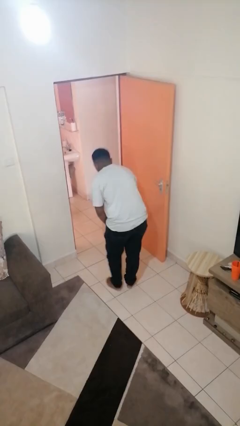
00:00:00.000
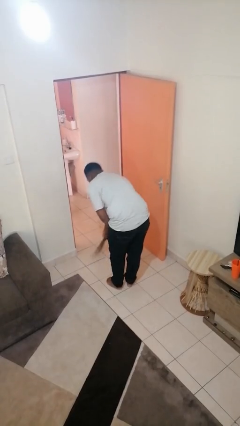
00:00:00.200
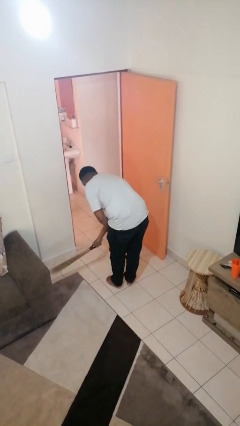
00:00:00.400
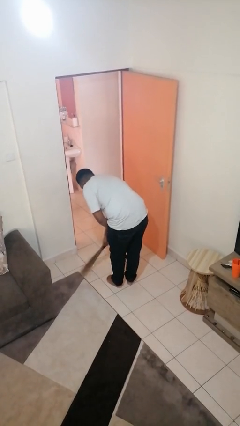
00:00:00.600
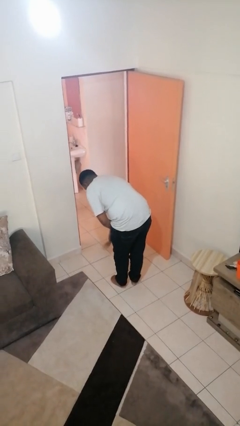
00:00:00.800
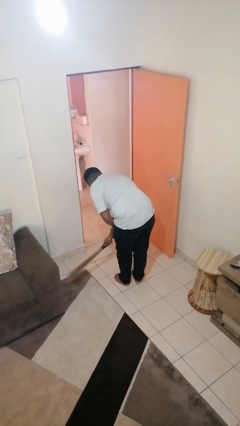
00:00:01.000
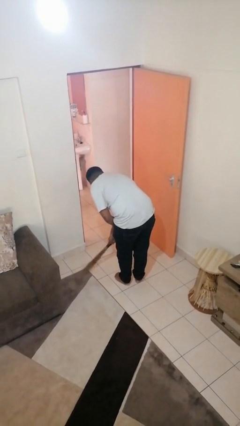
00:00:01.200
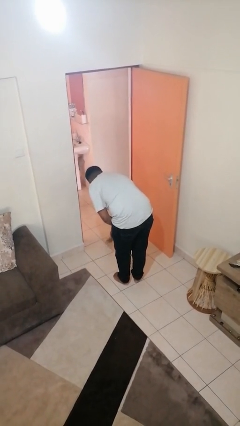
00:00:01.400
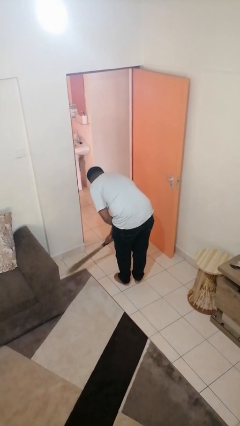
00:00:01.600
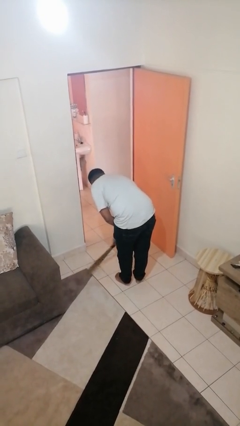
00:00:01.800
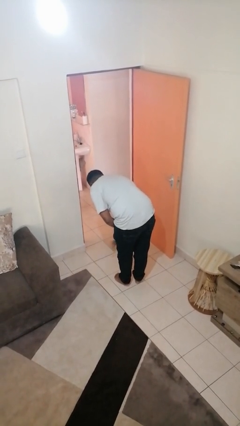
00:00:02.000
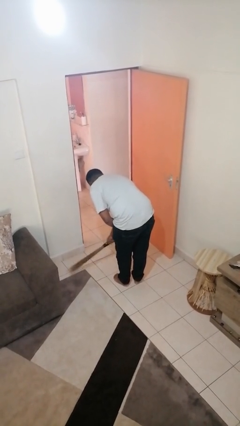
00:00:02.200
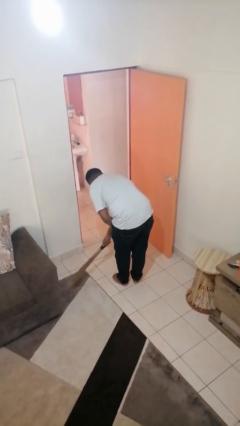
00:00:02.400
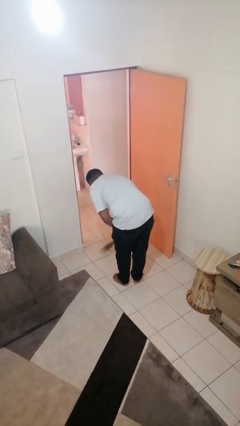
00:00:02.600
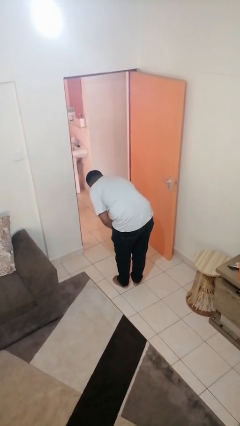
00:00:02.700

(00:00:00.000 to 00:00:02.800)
person sweeps floor

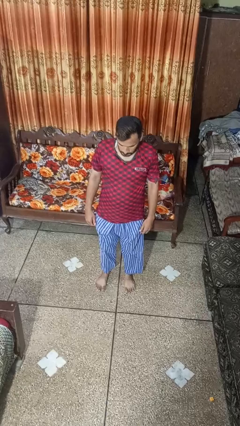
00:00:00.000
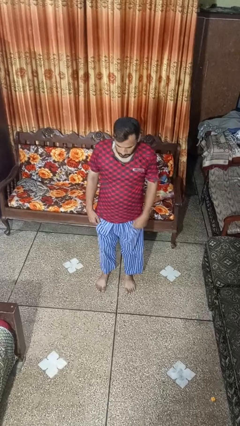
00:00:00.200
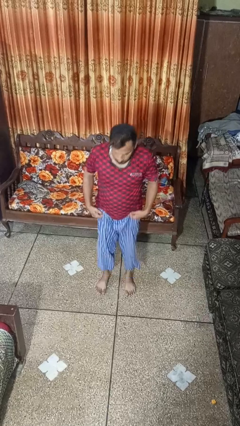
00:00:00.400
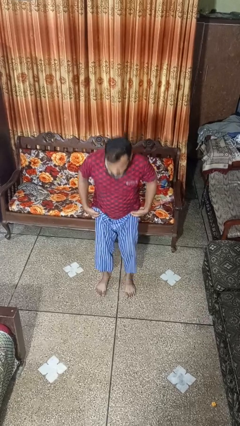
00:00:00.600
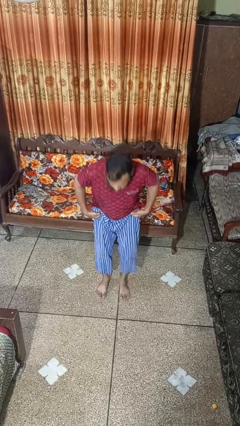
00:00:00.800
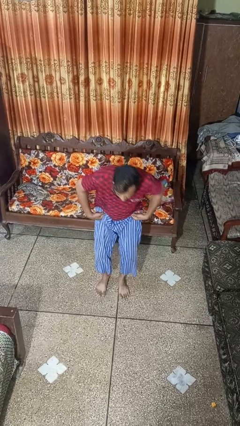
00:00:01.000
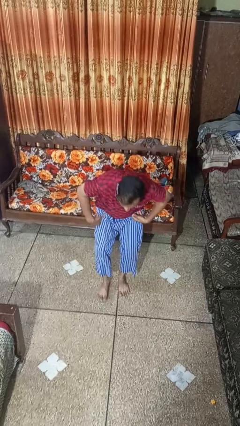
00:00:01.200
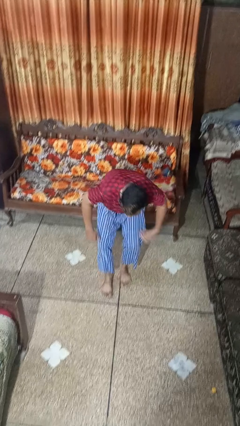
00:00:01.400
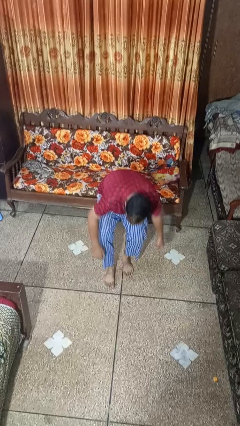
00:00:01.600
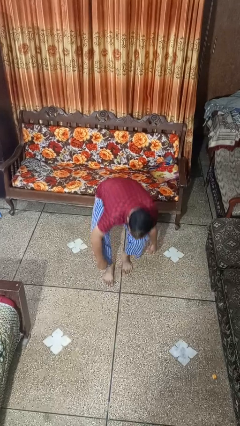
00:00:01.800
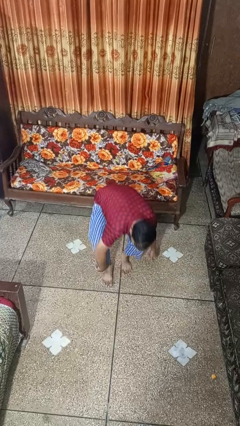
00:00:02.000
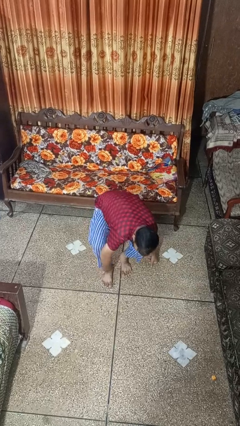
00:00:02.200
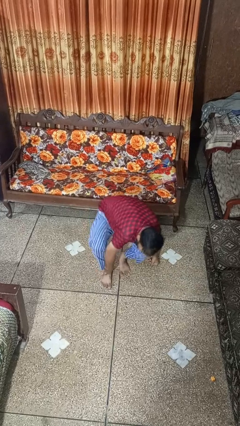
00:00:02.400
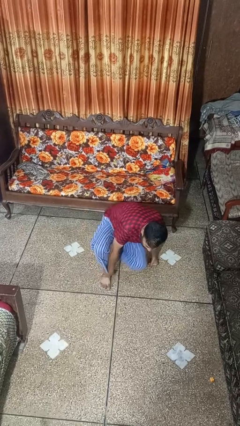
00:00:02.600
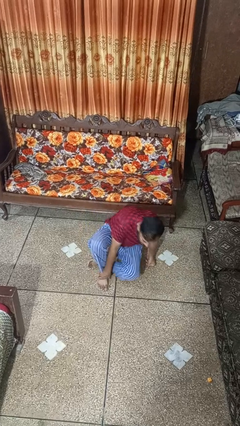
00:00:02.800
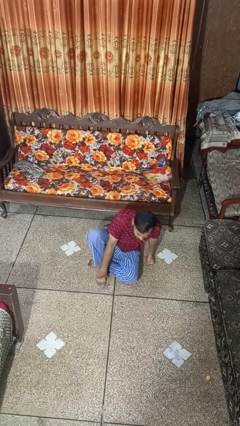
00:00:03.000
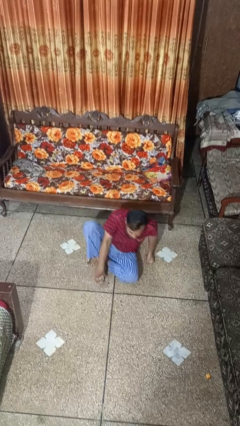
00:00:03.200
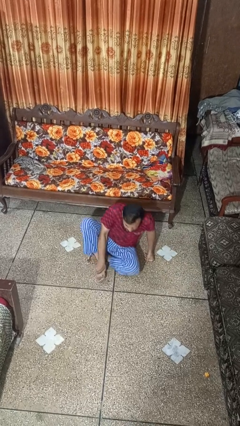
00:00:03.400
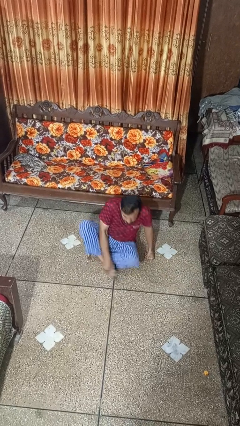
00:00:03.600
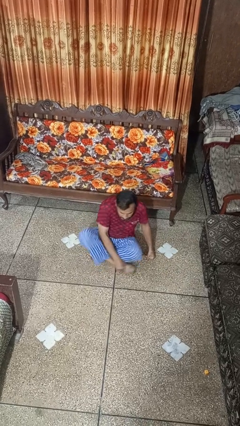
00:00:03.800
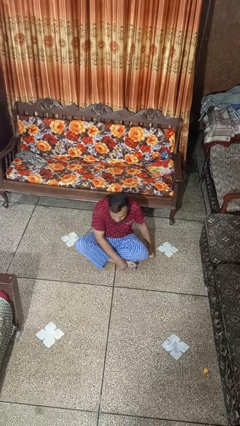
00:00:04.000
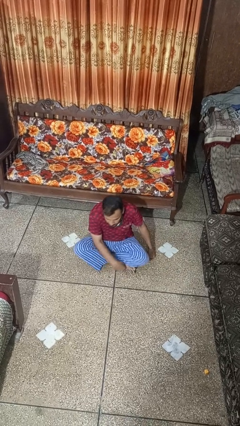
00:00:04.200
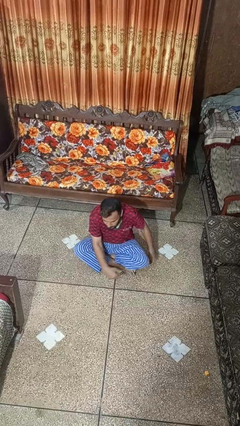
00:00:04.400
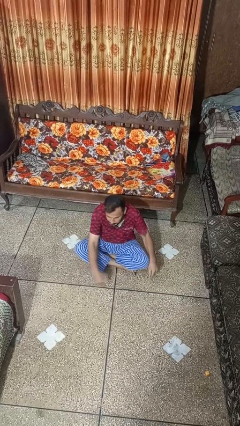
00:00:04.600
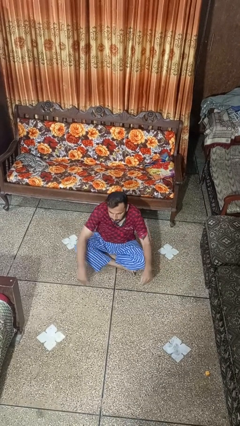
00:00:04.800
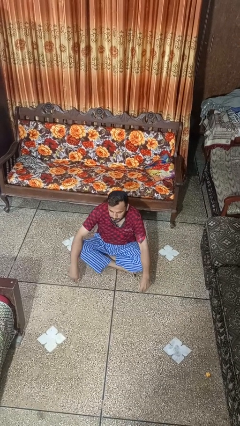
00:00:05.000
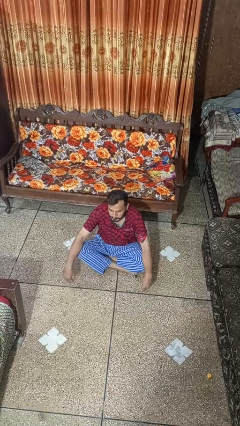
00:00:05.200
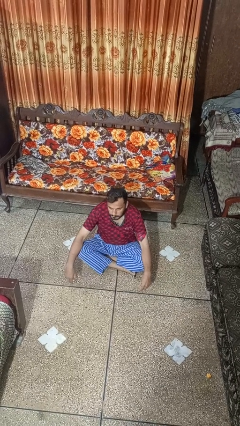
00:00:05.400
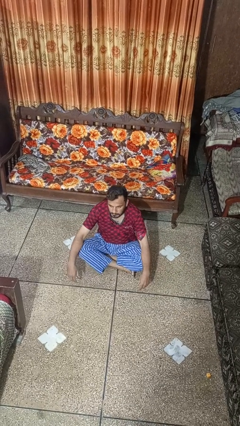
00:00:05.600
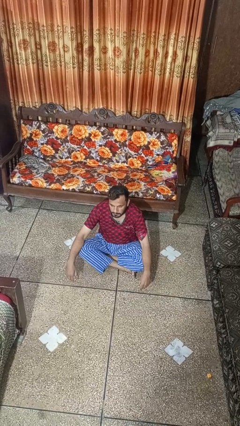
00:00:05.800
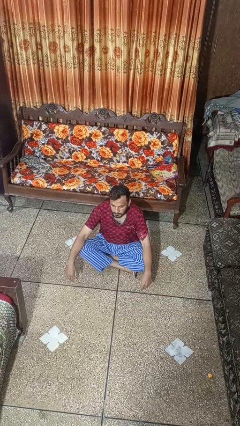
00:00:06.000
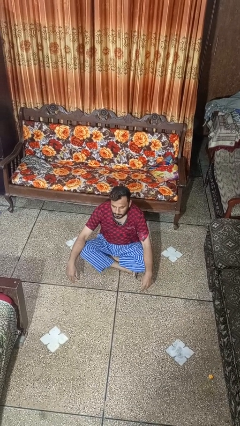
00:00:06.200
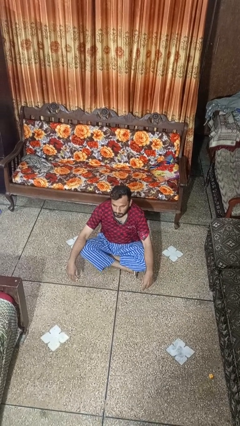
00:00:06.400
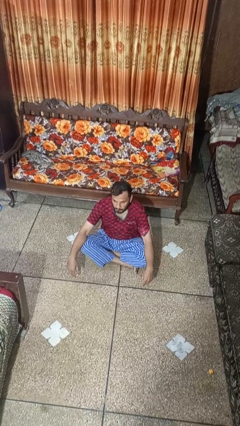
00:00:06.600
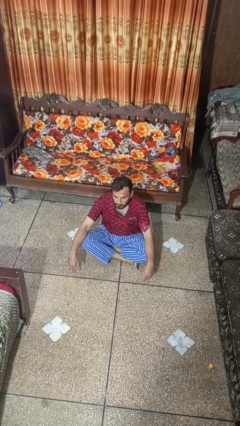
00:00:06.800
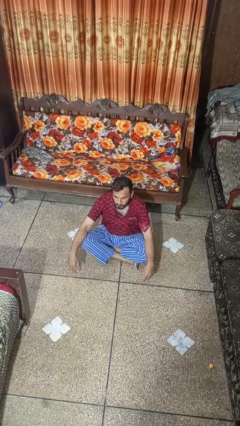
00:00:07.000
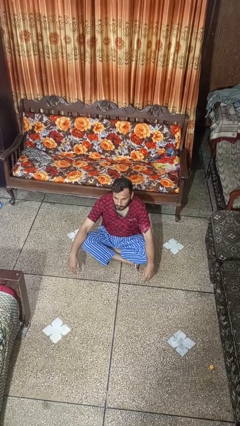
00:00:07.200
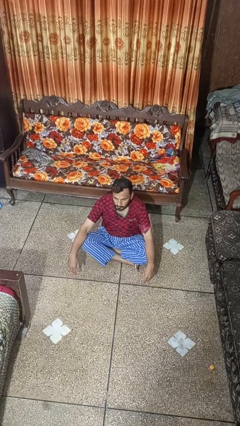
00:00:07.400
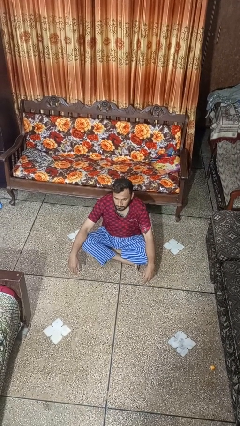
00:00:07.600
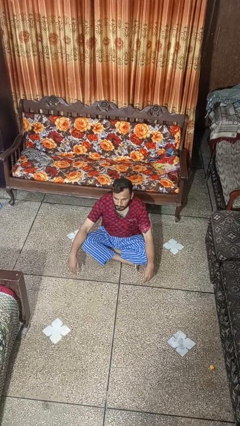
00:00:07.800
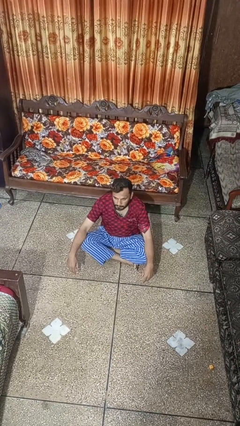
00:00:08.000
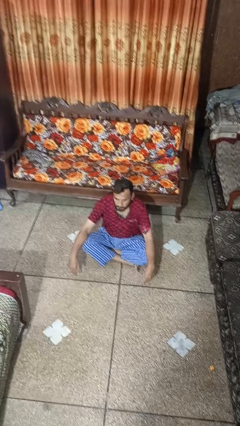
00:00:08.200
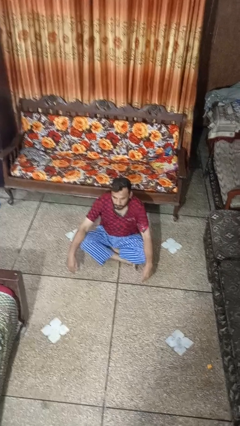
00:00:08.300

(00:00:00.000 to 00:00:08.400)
person sits crisscross

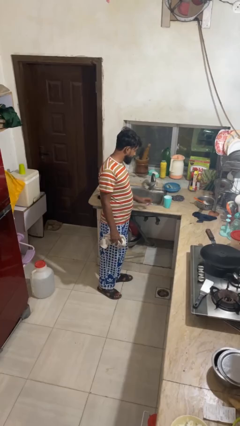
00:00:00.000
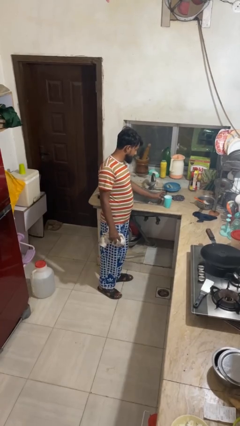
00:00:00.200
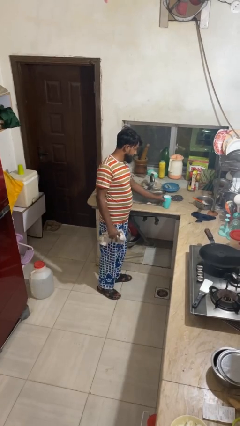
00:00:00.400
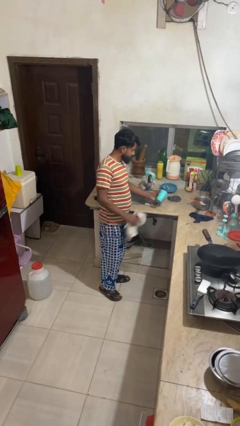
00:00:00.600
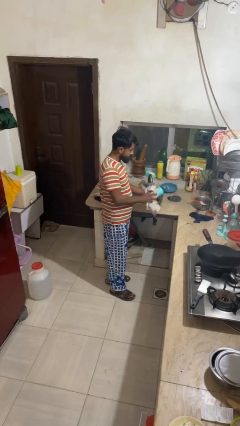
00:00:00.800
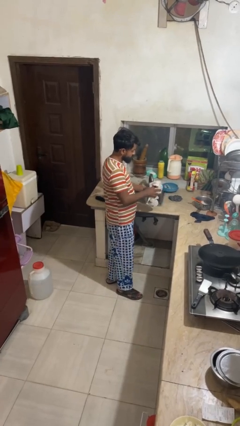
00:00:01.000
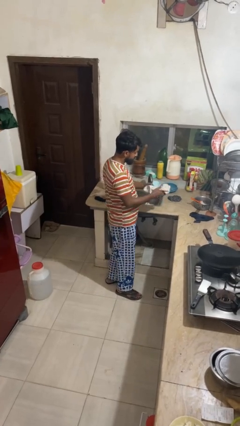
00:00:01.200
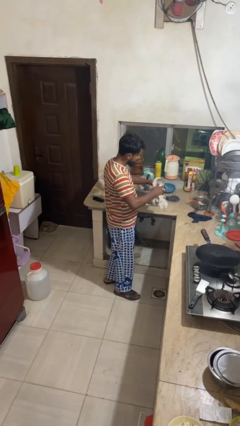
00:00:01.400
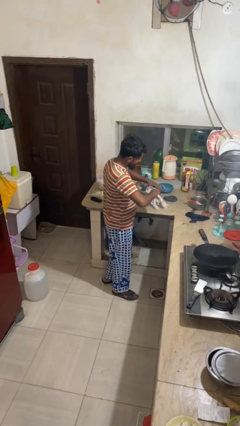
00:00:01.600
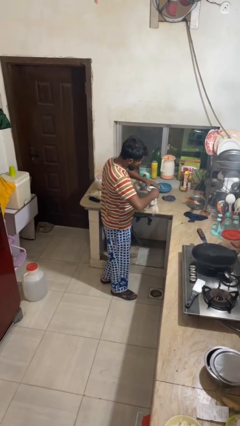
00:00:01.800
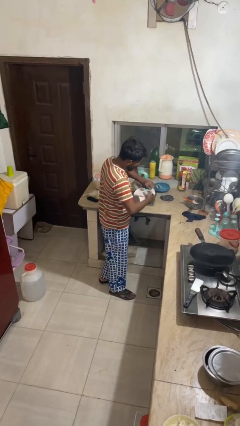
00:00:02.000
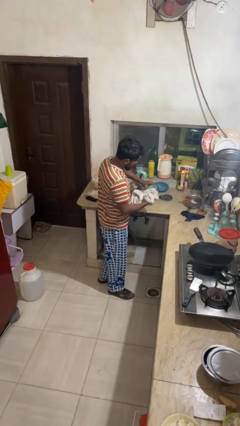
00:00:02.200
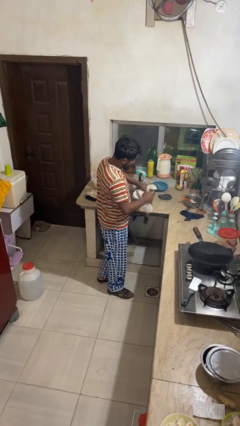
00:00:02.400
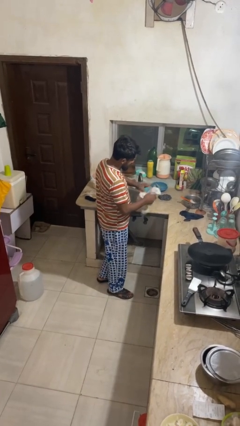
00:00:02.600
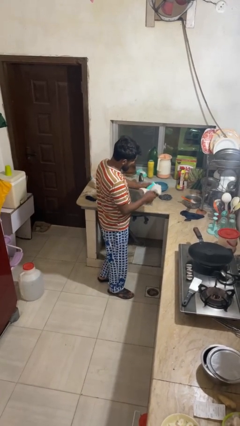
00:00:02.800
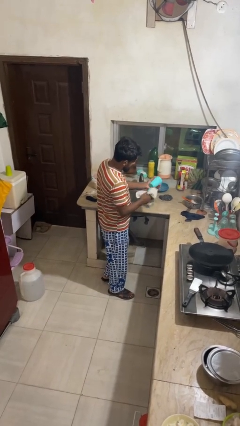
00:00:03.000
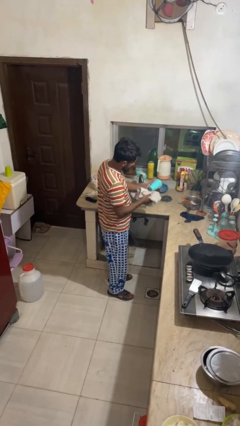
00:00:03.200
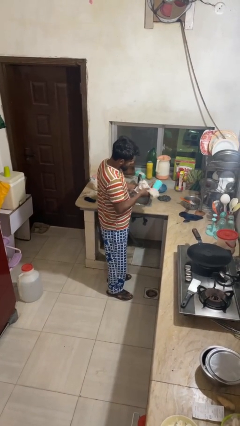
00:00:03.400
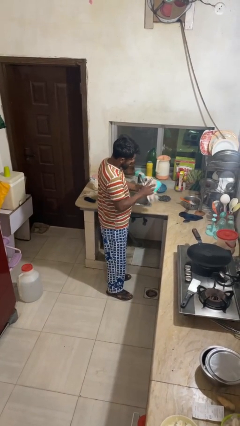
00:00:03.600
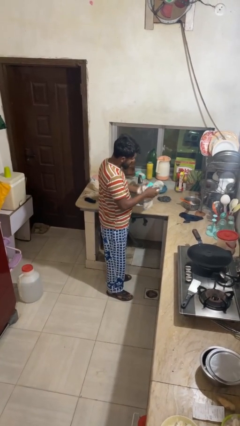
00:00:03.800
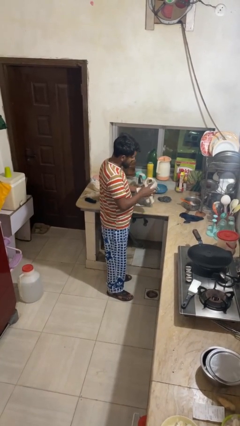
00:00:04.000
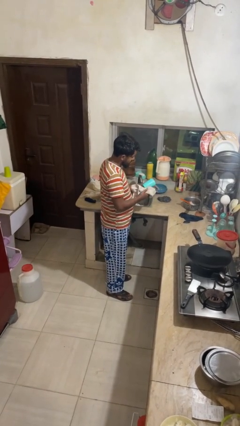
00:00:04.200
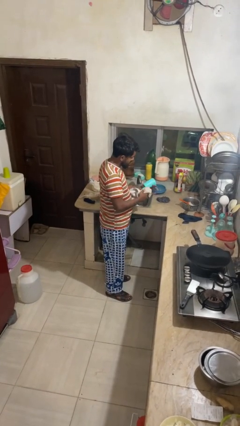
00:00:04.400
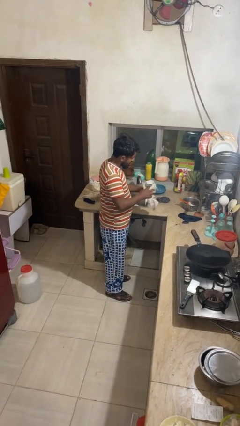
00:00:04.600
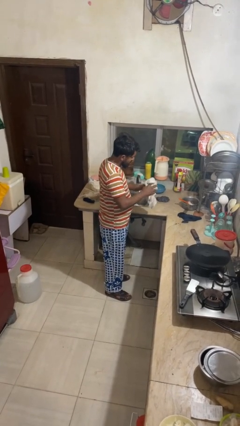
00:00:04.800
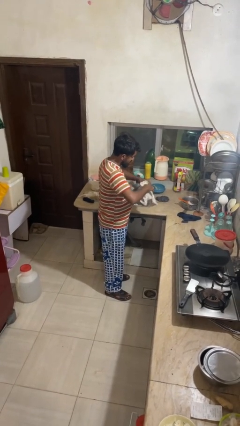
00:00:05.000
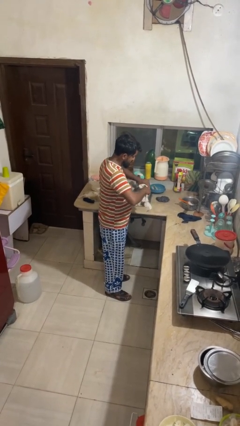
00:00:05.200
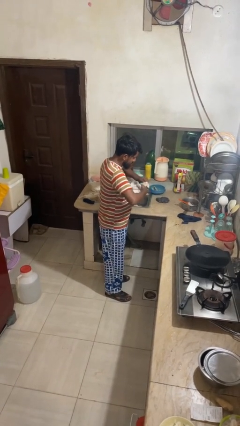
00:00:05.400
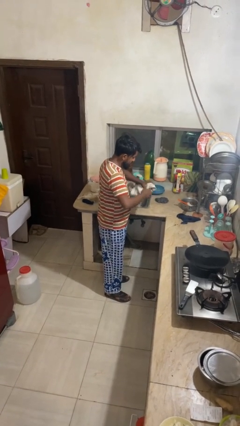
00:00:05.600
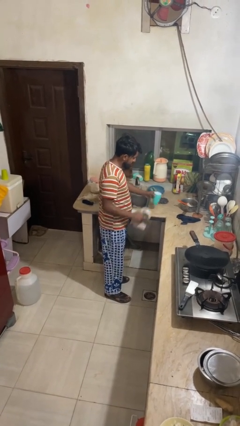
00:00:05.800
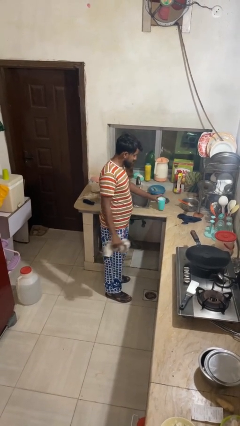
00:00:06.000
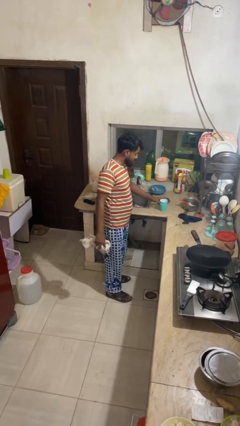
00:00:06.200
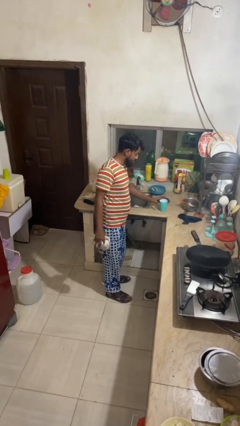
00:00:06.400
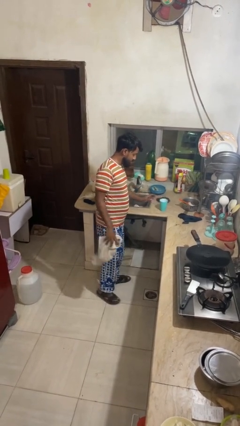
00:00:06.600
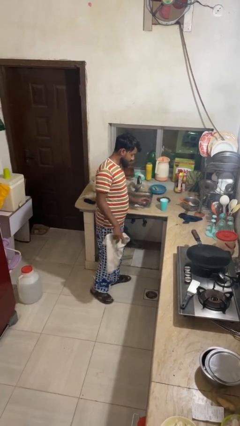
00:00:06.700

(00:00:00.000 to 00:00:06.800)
person dries dish
